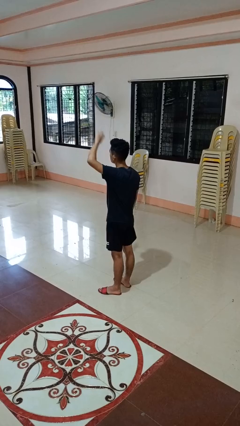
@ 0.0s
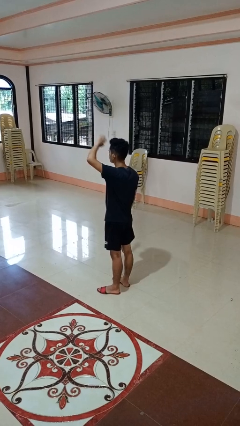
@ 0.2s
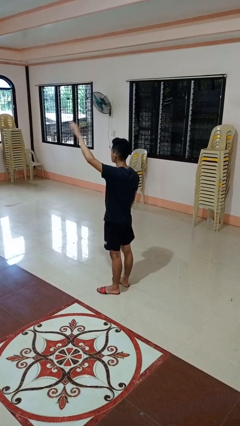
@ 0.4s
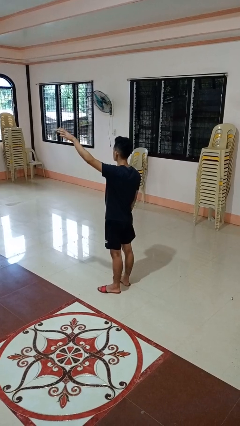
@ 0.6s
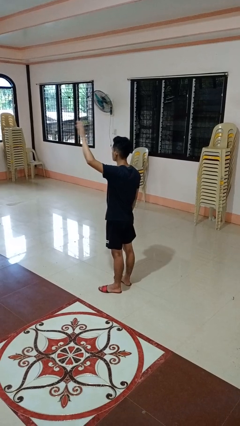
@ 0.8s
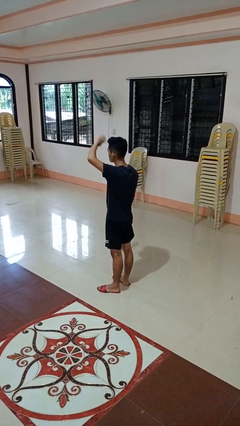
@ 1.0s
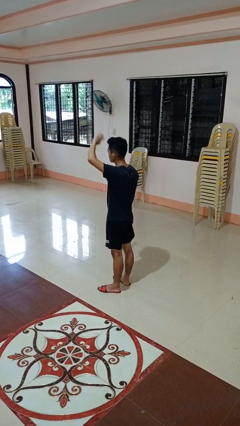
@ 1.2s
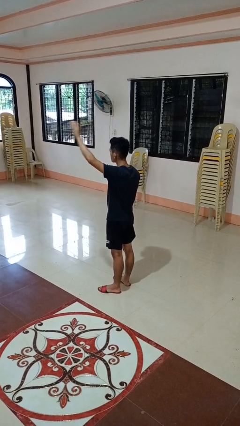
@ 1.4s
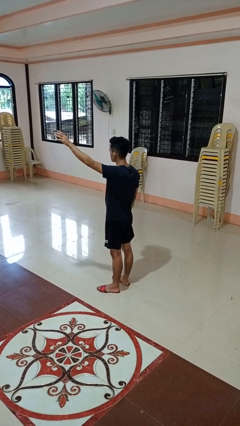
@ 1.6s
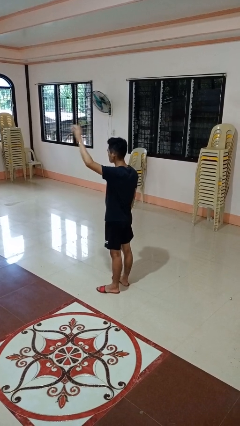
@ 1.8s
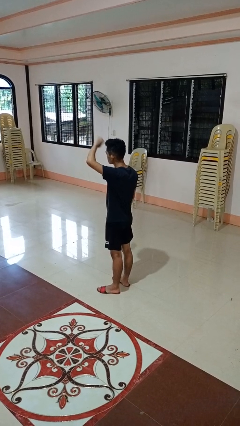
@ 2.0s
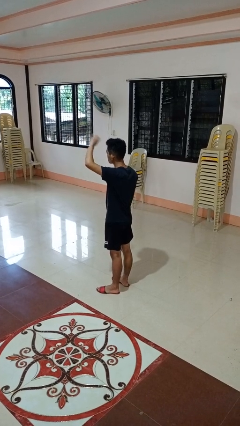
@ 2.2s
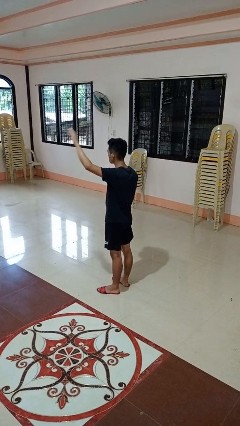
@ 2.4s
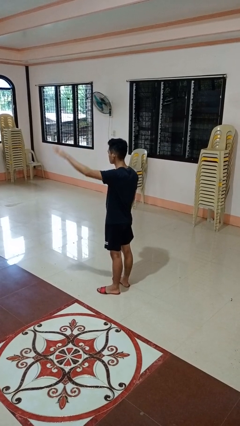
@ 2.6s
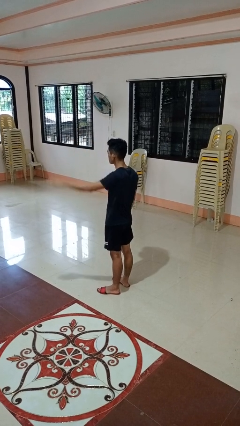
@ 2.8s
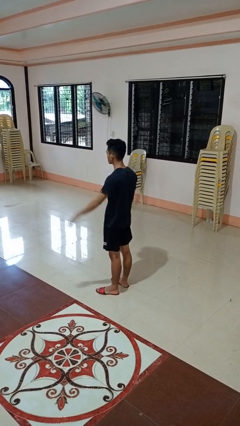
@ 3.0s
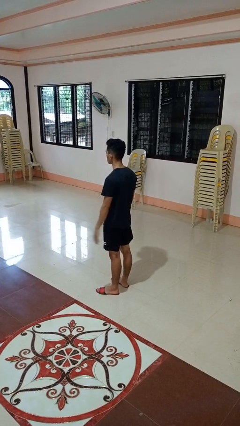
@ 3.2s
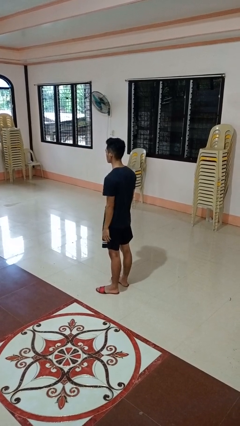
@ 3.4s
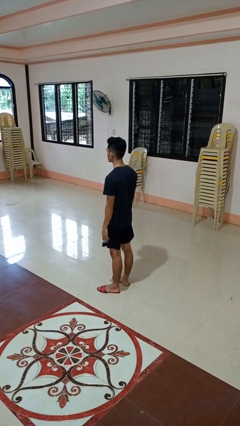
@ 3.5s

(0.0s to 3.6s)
person waves at person

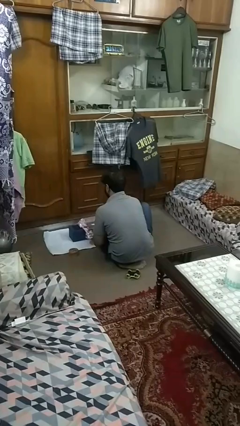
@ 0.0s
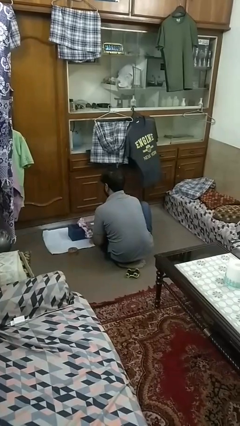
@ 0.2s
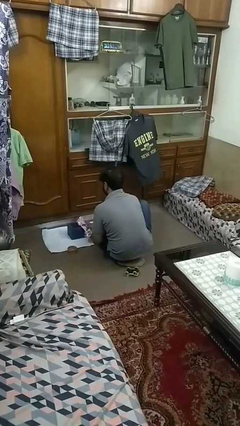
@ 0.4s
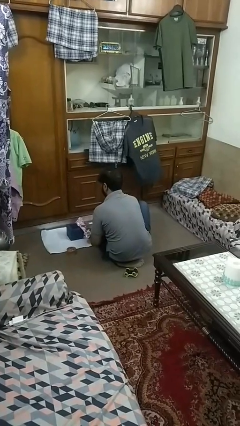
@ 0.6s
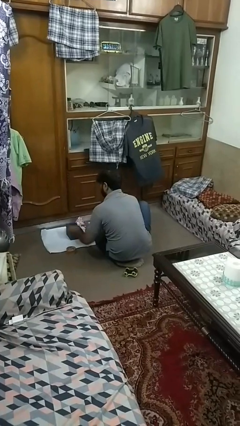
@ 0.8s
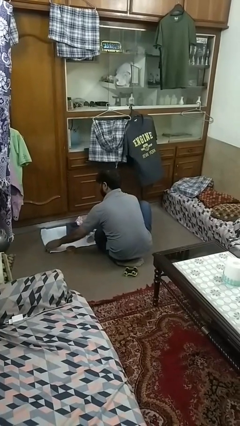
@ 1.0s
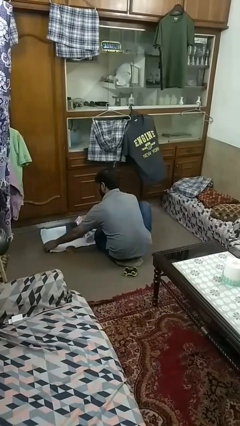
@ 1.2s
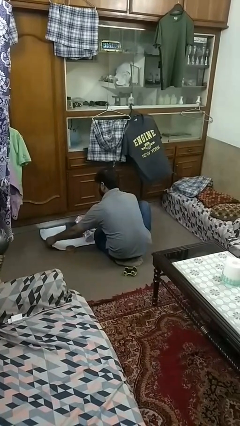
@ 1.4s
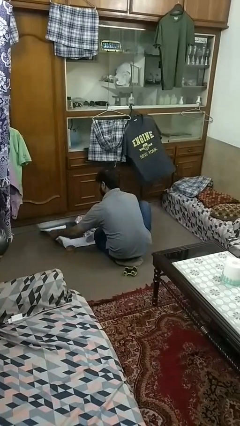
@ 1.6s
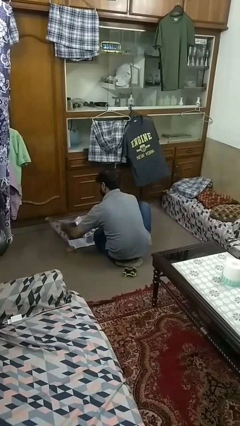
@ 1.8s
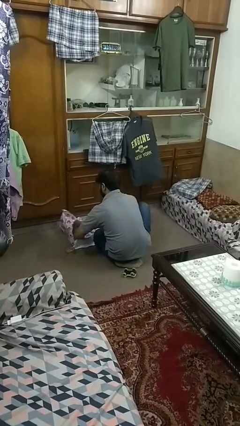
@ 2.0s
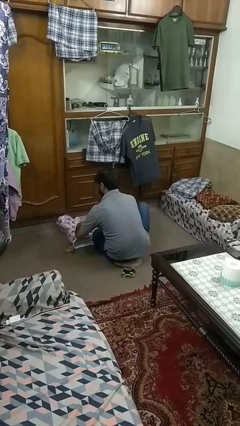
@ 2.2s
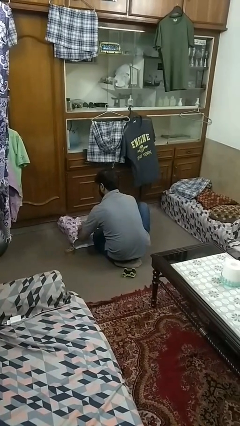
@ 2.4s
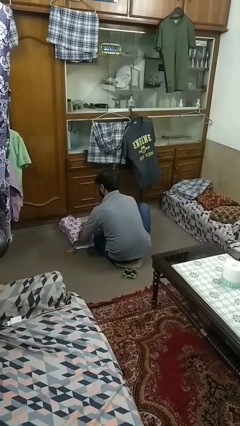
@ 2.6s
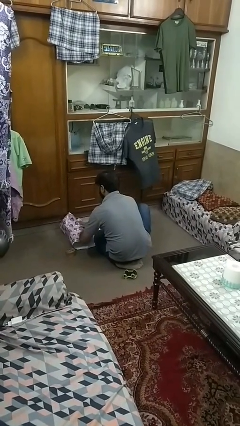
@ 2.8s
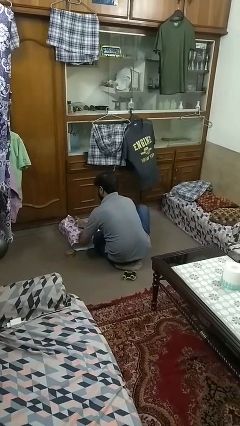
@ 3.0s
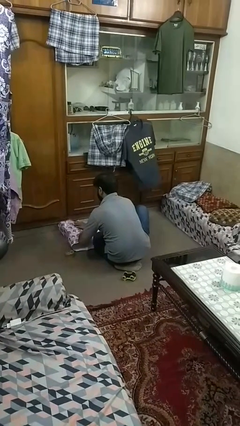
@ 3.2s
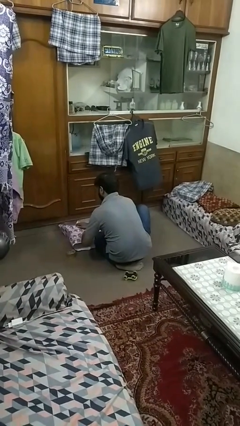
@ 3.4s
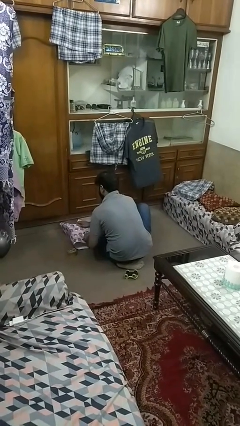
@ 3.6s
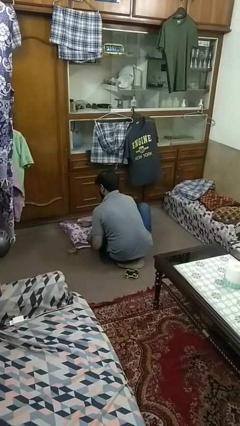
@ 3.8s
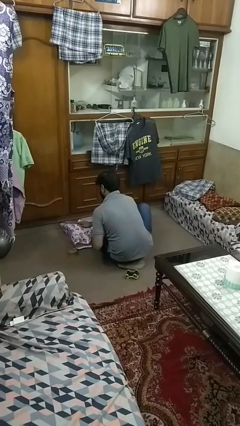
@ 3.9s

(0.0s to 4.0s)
person wraps box

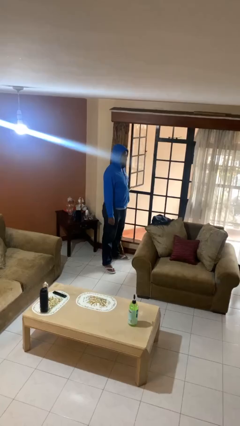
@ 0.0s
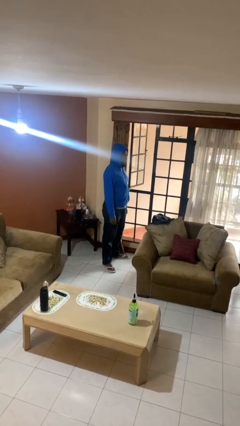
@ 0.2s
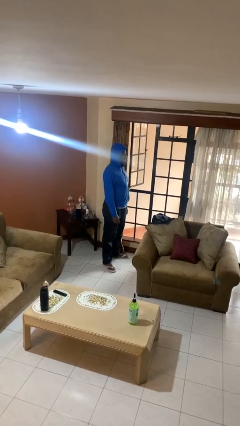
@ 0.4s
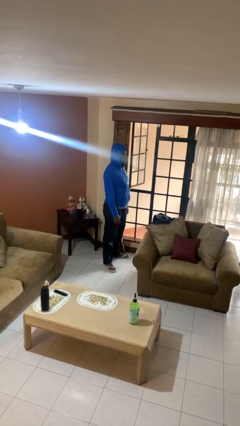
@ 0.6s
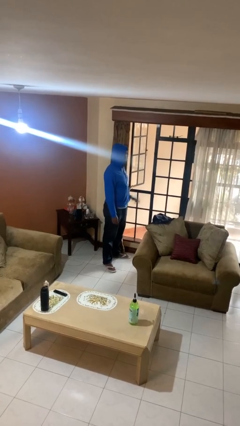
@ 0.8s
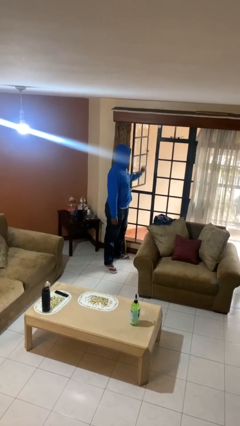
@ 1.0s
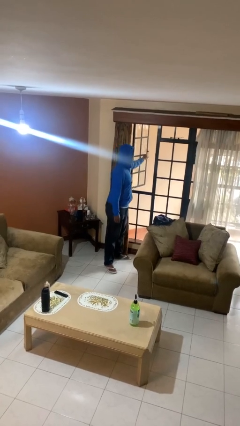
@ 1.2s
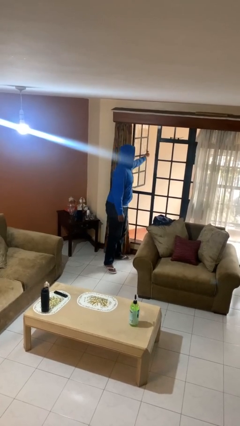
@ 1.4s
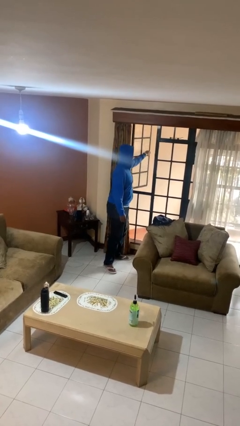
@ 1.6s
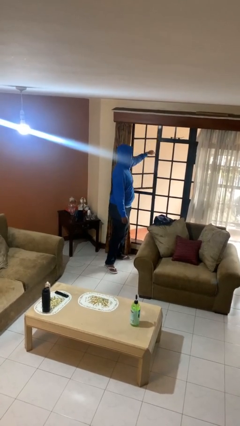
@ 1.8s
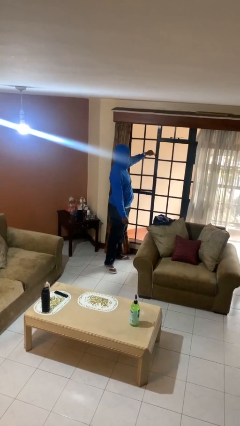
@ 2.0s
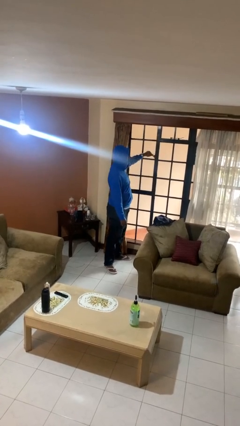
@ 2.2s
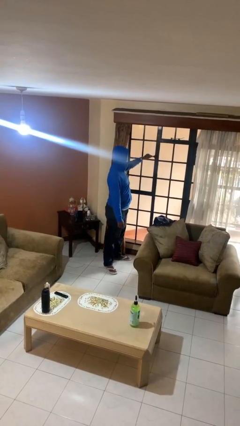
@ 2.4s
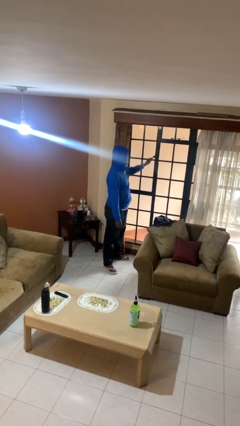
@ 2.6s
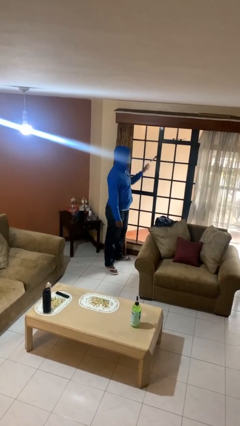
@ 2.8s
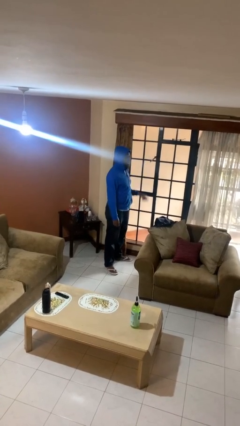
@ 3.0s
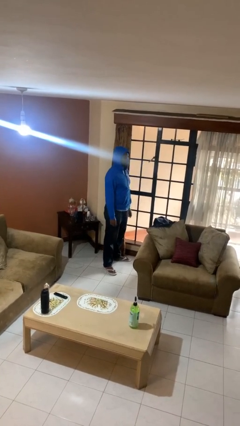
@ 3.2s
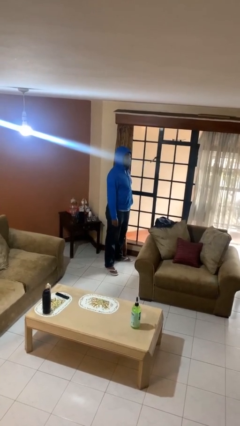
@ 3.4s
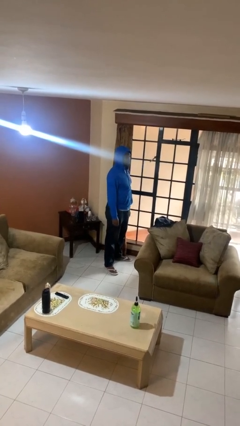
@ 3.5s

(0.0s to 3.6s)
person closes home window

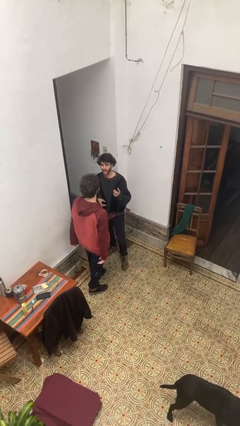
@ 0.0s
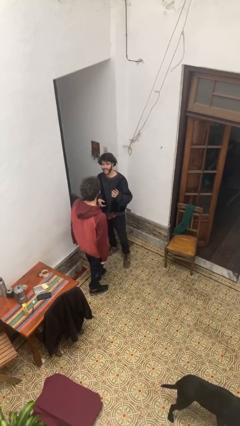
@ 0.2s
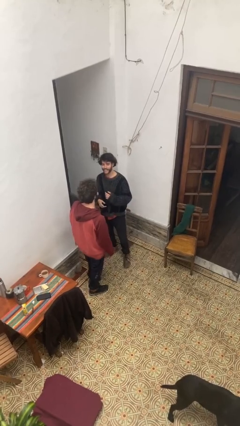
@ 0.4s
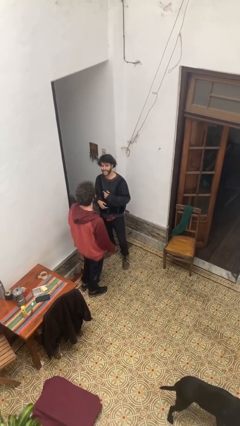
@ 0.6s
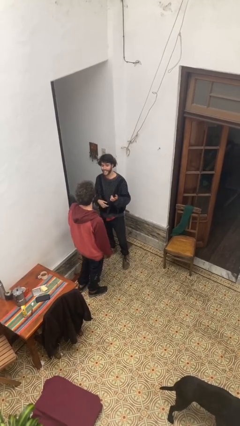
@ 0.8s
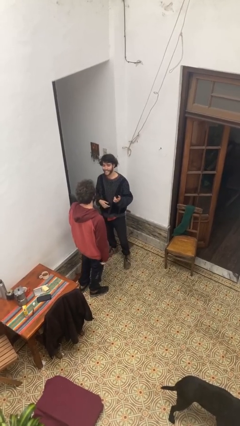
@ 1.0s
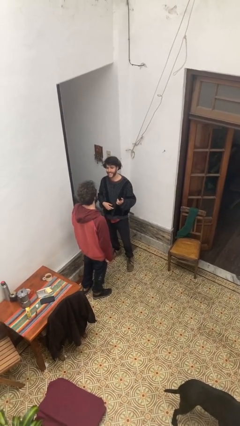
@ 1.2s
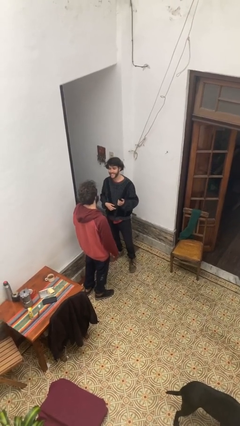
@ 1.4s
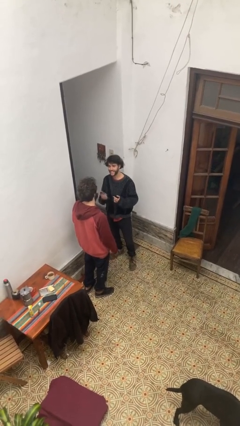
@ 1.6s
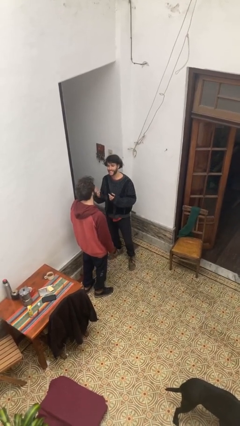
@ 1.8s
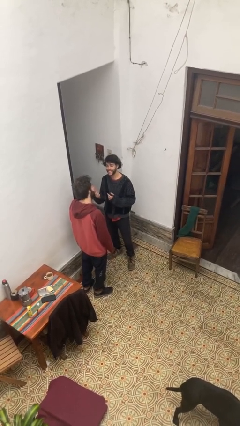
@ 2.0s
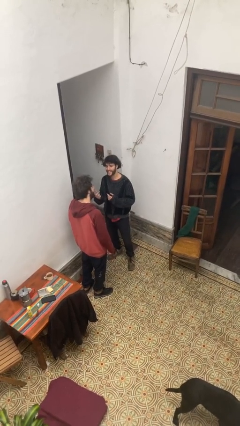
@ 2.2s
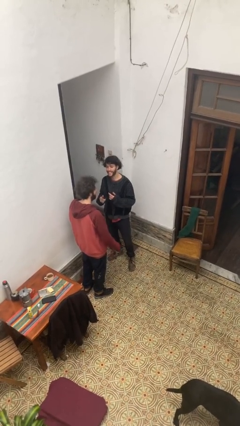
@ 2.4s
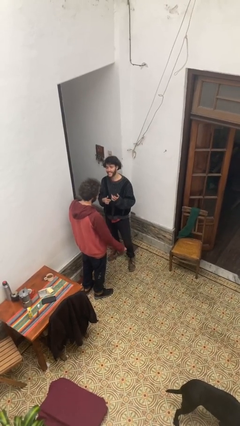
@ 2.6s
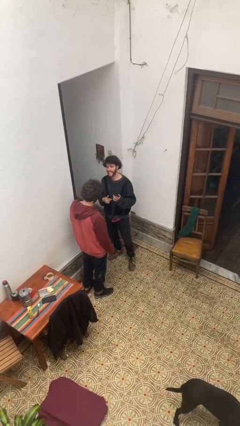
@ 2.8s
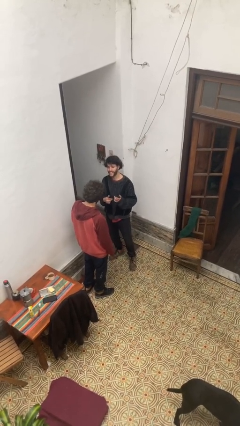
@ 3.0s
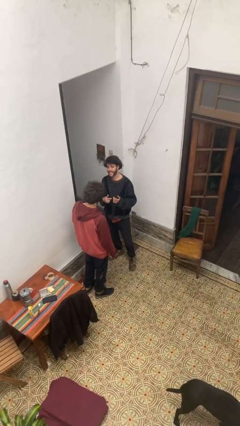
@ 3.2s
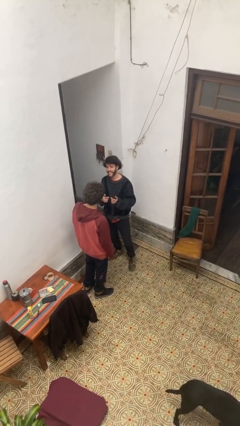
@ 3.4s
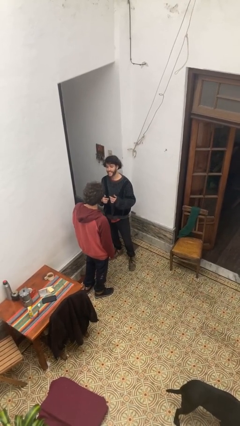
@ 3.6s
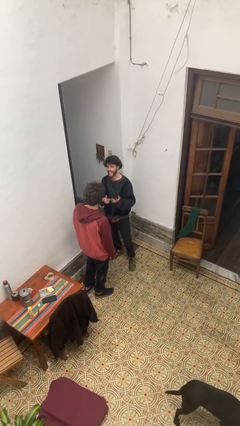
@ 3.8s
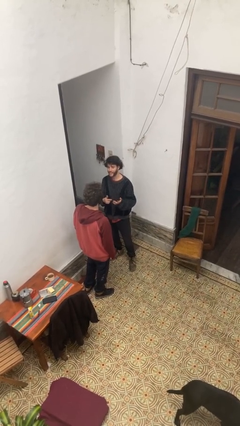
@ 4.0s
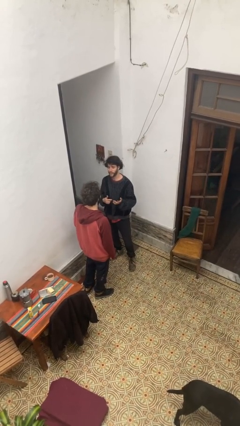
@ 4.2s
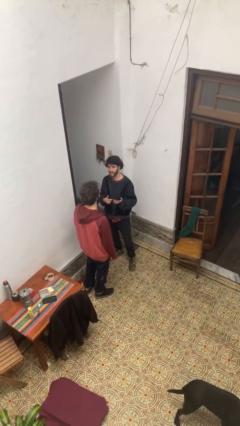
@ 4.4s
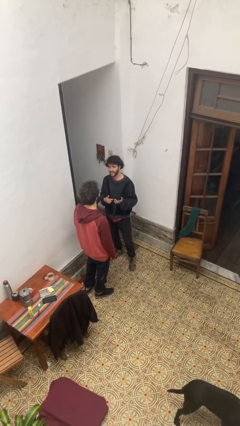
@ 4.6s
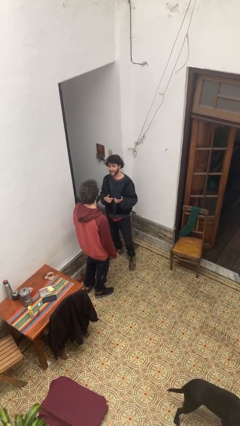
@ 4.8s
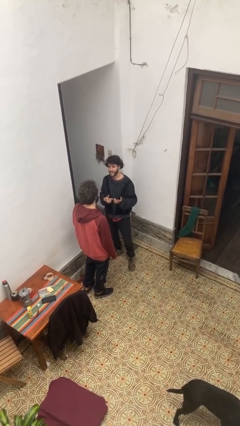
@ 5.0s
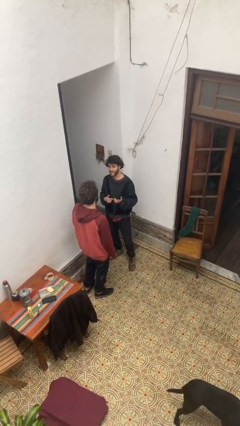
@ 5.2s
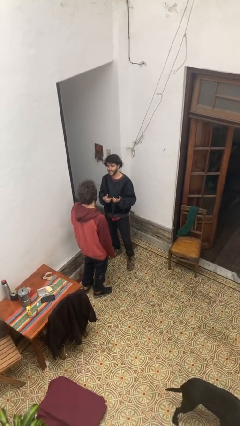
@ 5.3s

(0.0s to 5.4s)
person talks to person

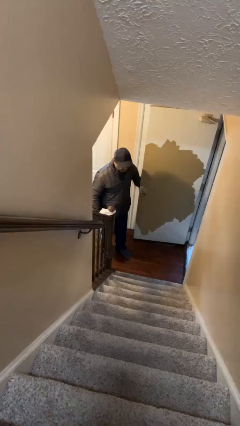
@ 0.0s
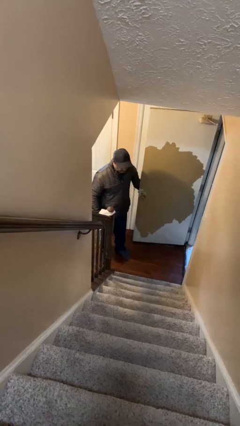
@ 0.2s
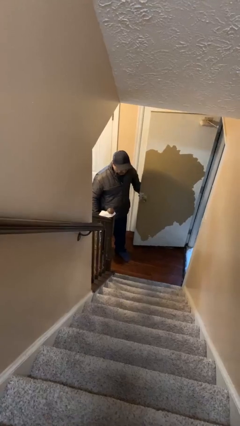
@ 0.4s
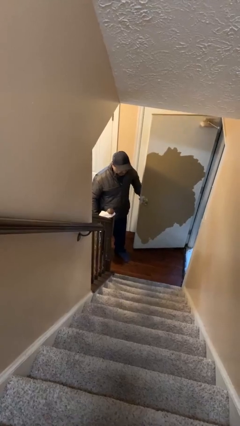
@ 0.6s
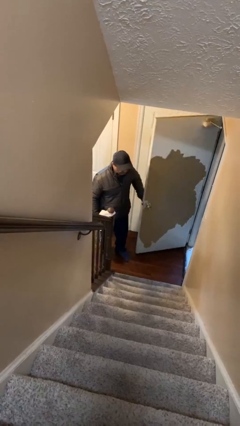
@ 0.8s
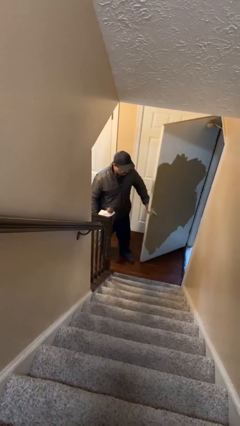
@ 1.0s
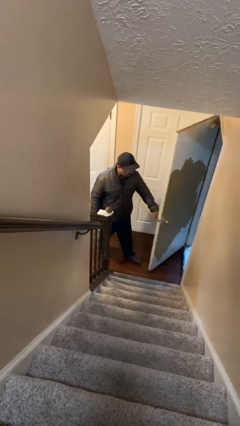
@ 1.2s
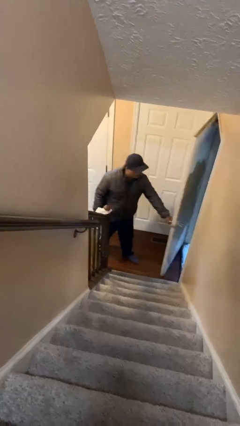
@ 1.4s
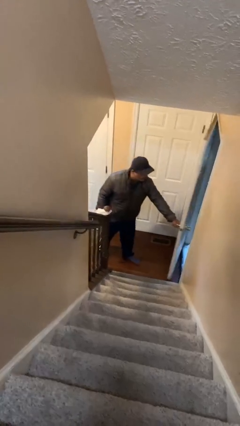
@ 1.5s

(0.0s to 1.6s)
person closes facility door
